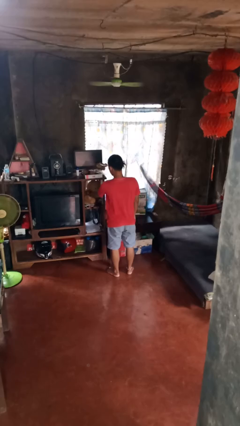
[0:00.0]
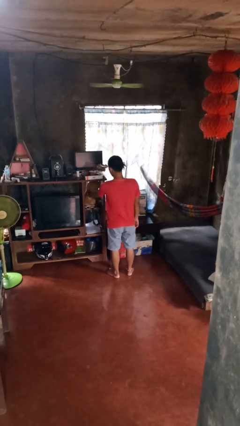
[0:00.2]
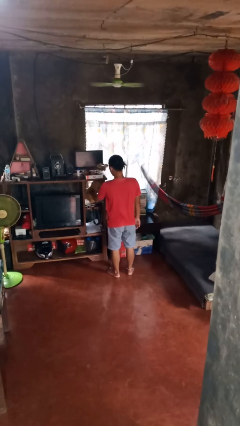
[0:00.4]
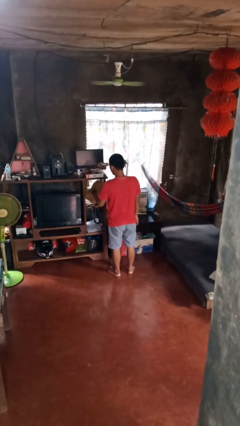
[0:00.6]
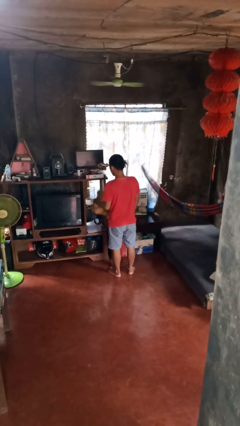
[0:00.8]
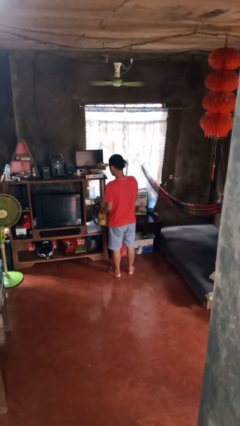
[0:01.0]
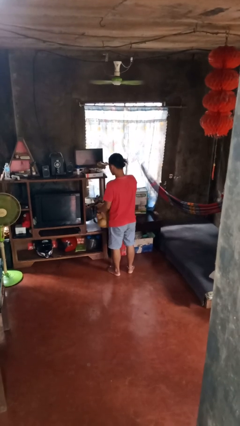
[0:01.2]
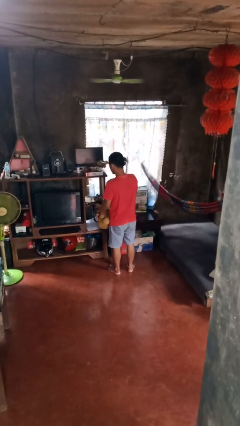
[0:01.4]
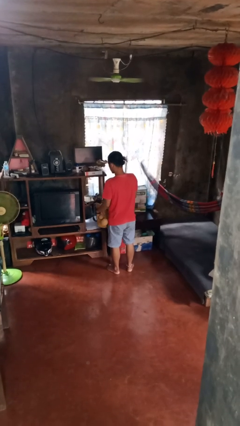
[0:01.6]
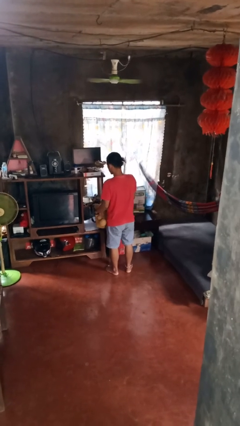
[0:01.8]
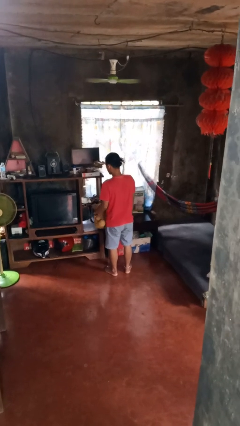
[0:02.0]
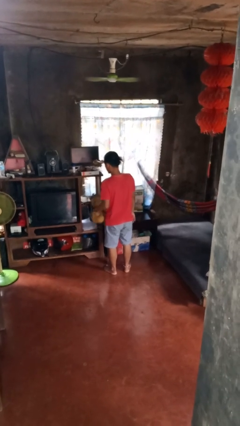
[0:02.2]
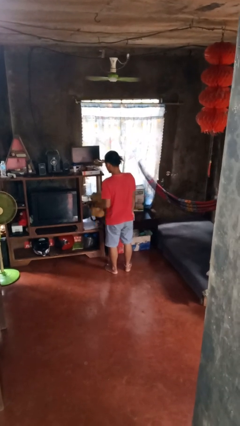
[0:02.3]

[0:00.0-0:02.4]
person picks up object from cabinet

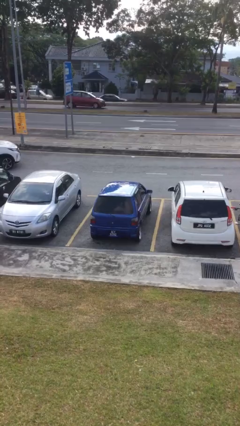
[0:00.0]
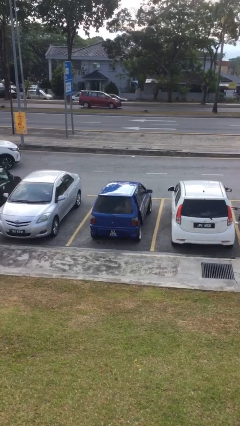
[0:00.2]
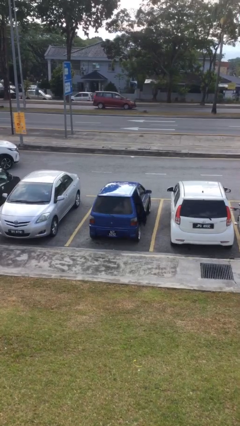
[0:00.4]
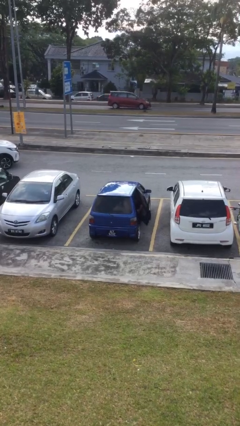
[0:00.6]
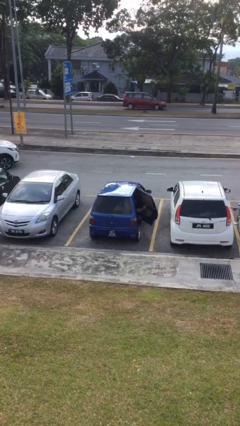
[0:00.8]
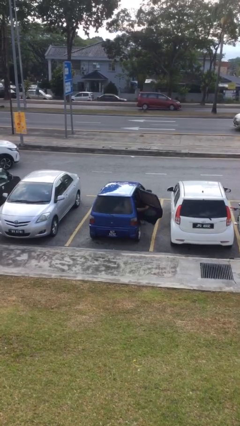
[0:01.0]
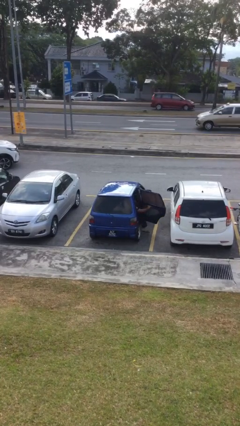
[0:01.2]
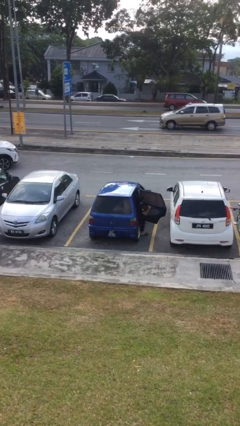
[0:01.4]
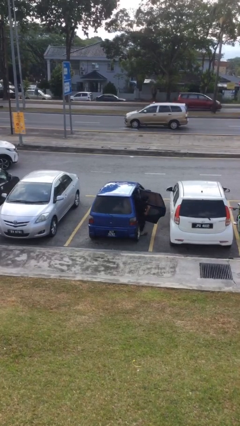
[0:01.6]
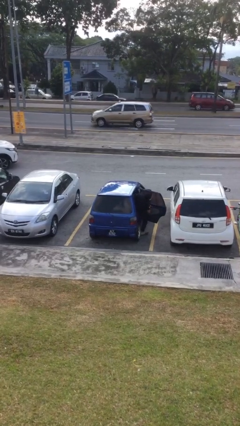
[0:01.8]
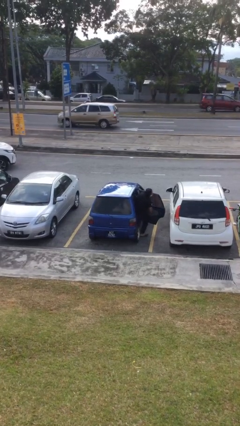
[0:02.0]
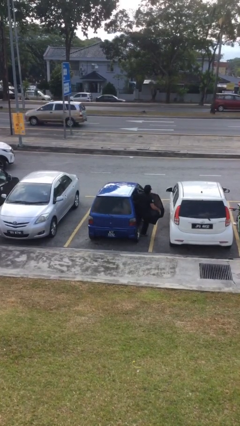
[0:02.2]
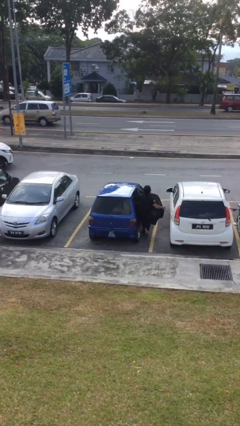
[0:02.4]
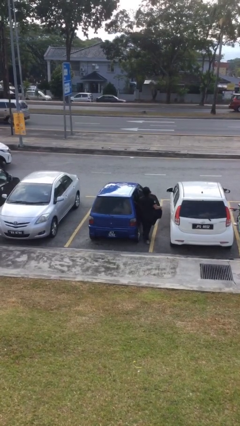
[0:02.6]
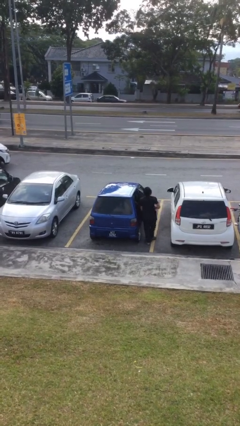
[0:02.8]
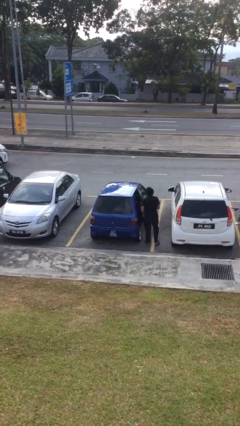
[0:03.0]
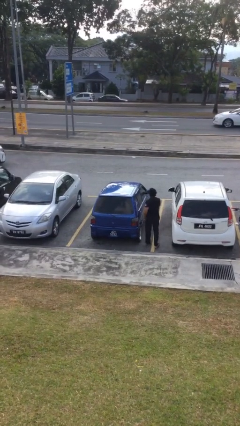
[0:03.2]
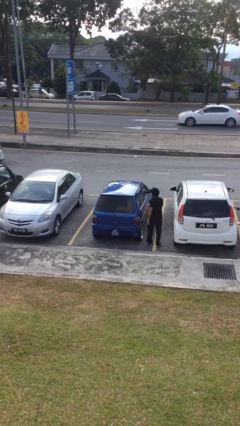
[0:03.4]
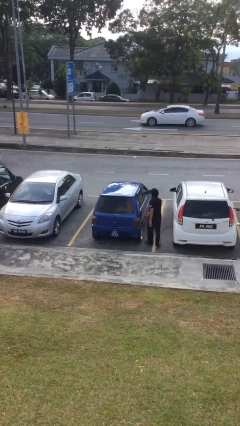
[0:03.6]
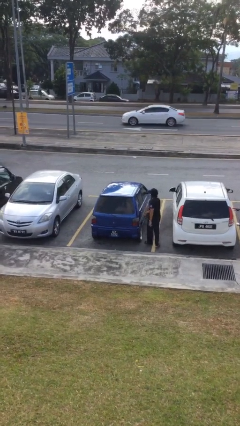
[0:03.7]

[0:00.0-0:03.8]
car drops off person

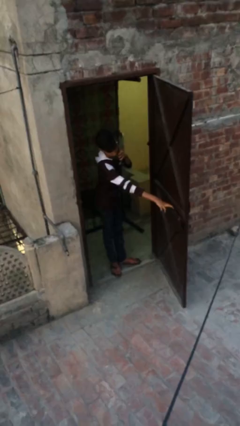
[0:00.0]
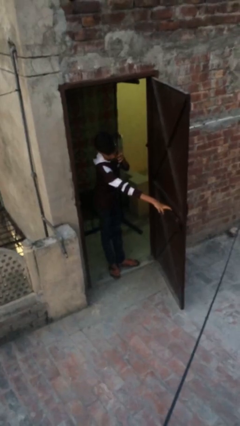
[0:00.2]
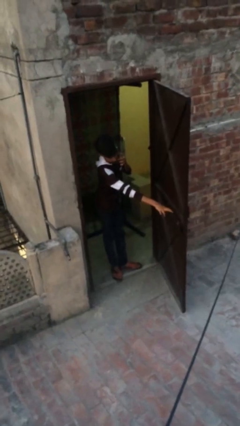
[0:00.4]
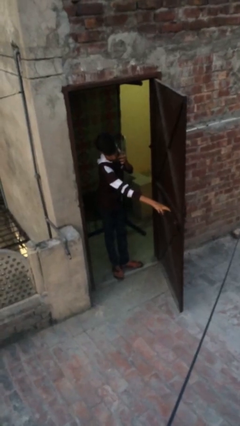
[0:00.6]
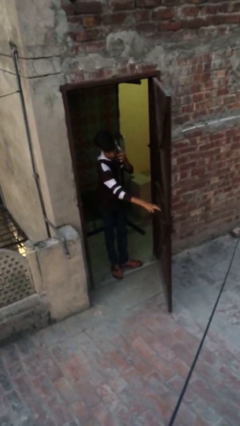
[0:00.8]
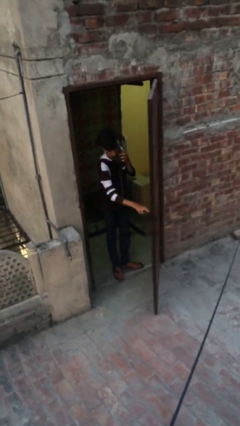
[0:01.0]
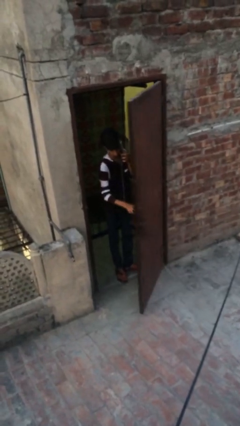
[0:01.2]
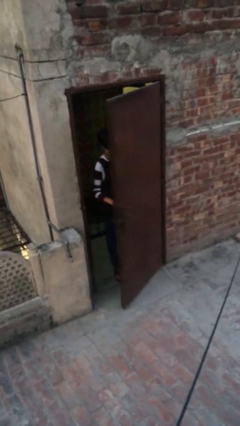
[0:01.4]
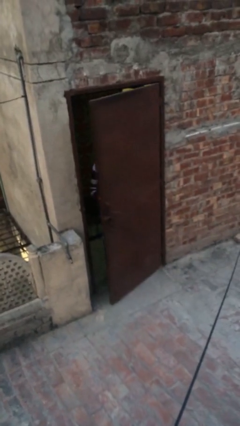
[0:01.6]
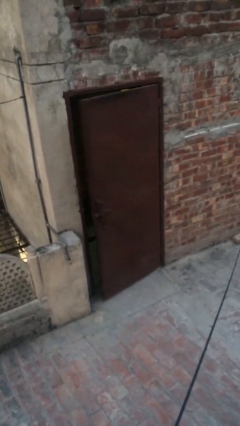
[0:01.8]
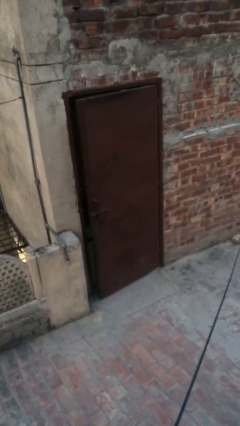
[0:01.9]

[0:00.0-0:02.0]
person closes facility door

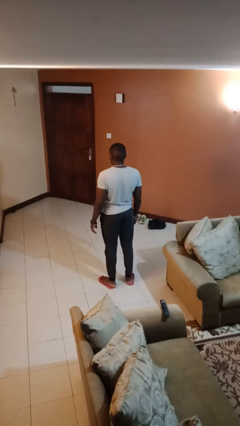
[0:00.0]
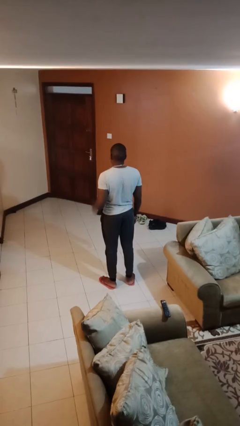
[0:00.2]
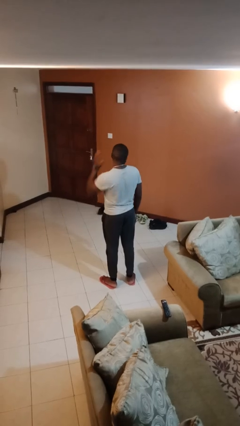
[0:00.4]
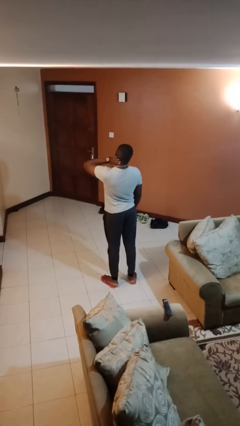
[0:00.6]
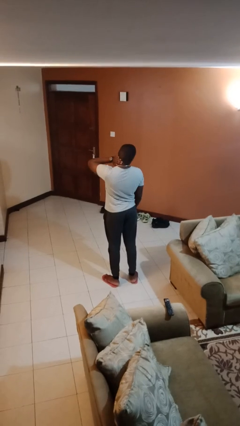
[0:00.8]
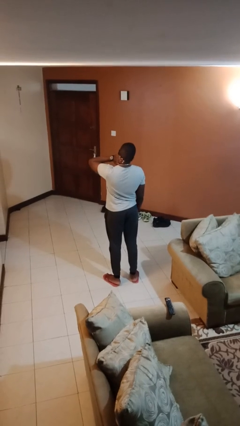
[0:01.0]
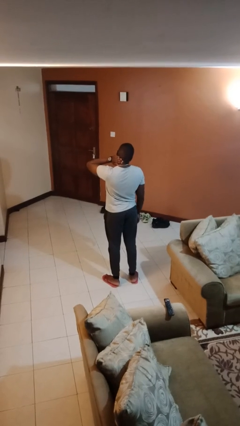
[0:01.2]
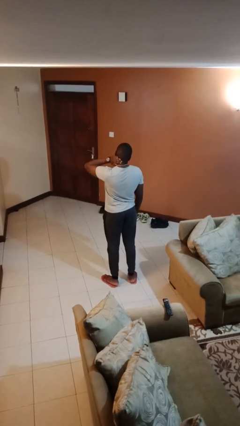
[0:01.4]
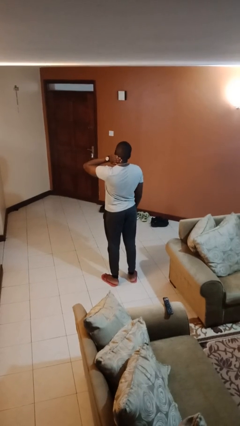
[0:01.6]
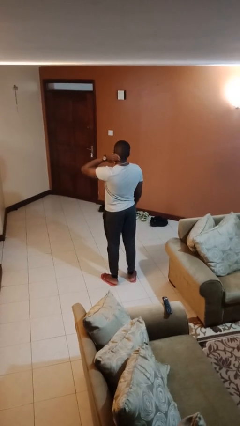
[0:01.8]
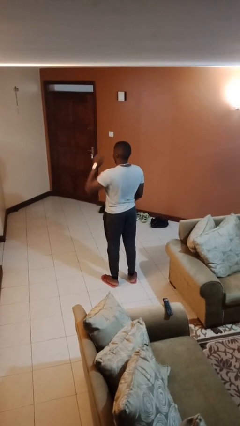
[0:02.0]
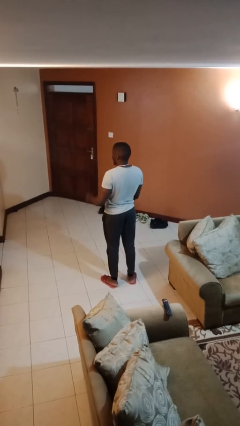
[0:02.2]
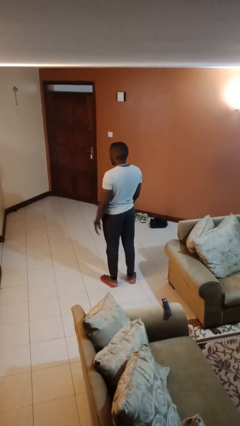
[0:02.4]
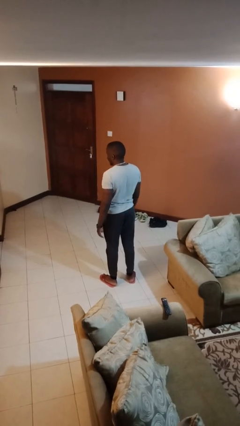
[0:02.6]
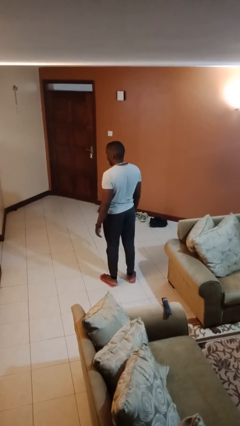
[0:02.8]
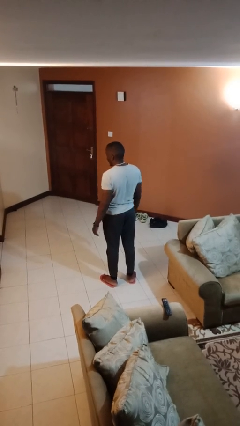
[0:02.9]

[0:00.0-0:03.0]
person swats bug

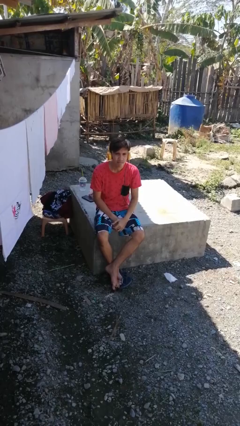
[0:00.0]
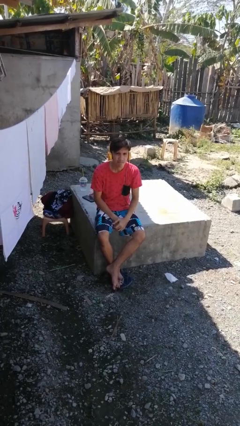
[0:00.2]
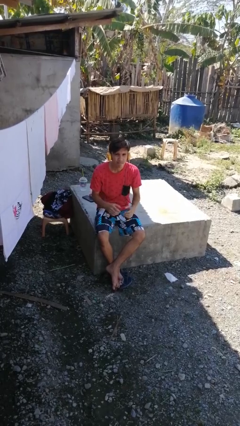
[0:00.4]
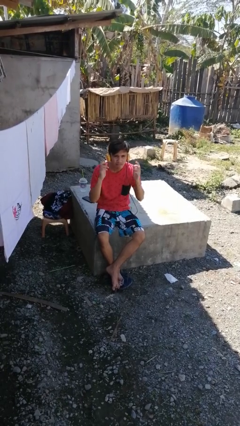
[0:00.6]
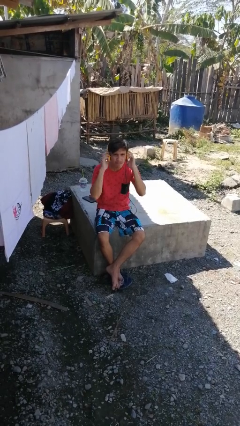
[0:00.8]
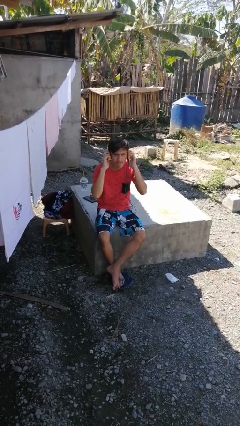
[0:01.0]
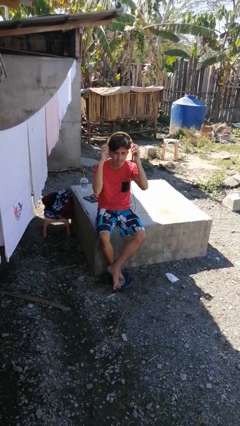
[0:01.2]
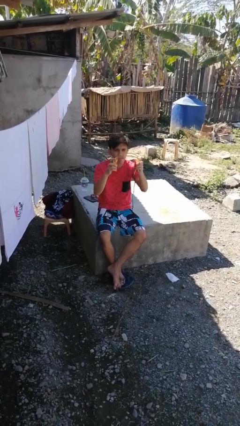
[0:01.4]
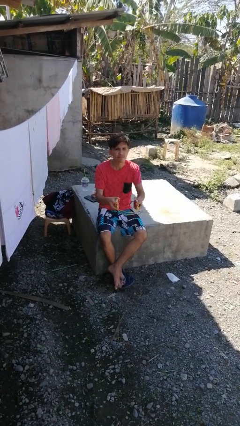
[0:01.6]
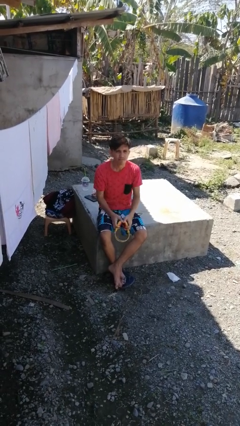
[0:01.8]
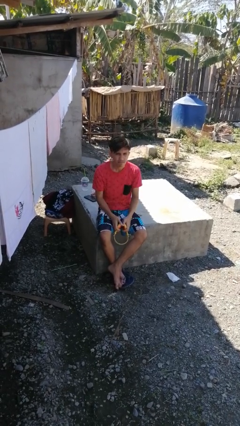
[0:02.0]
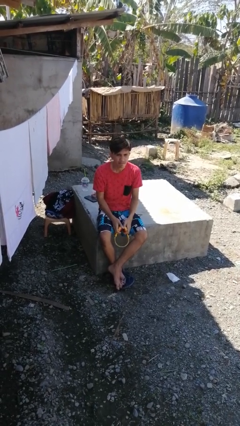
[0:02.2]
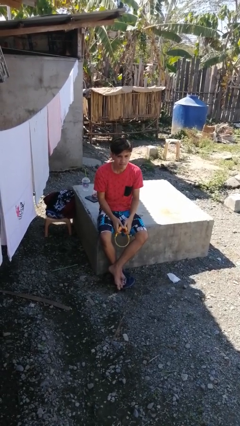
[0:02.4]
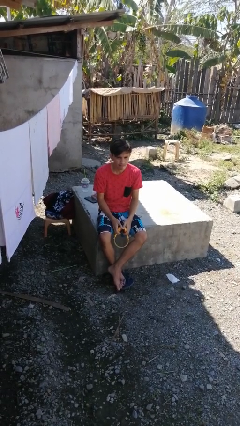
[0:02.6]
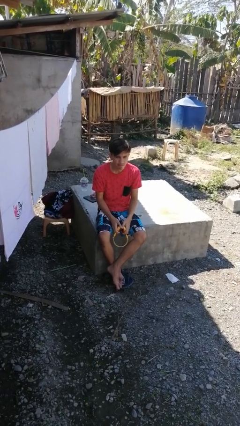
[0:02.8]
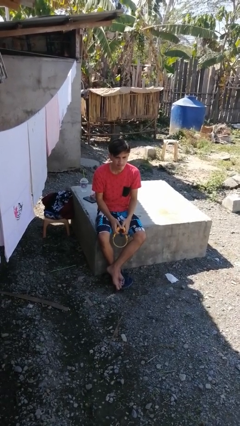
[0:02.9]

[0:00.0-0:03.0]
person takes off headphones

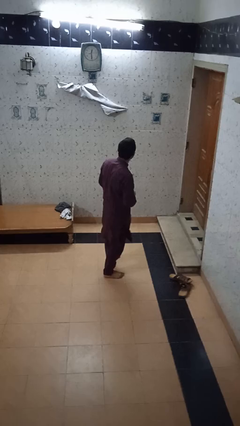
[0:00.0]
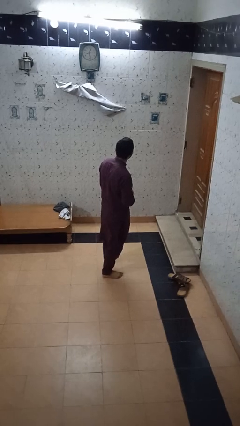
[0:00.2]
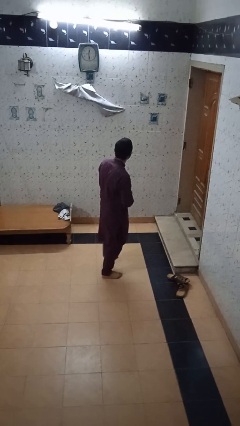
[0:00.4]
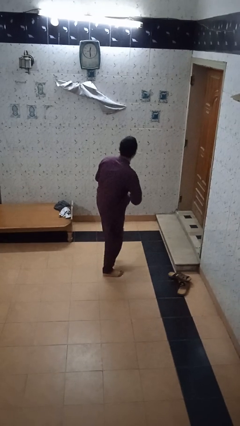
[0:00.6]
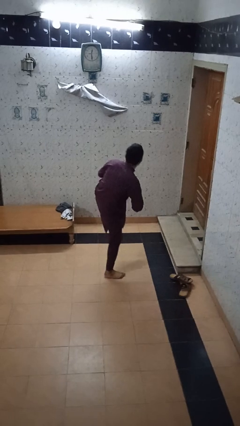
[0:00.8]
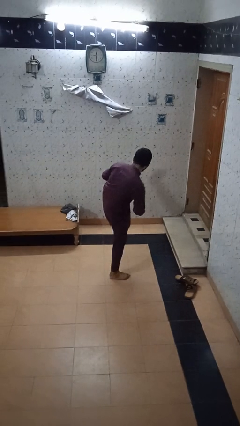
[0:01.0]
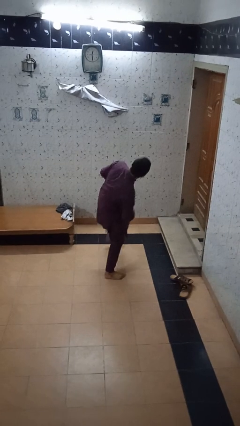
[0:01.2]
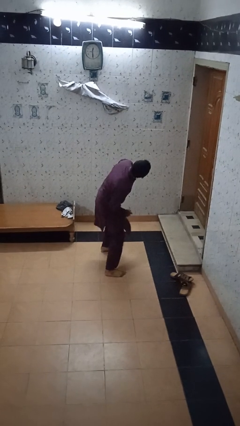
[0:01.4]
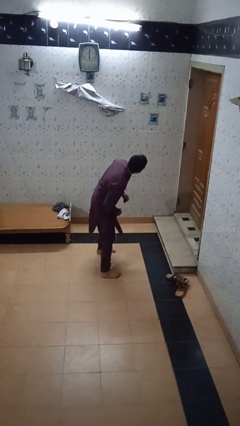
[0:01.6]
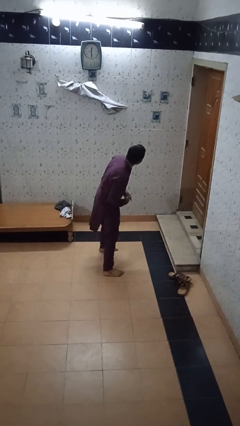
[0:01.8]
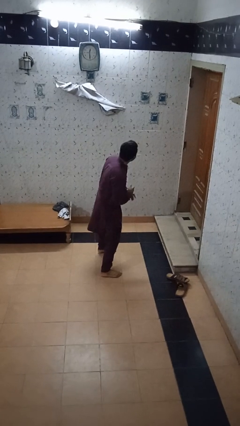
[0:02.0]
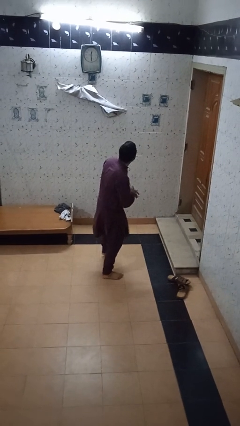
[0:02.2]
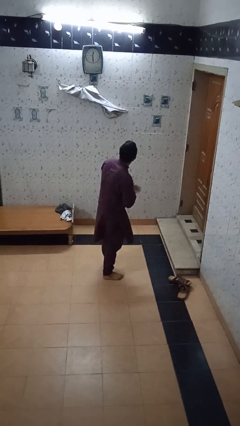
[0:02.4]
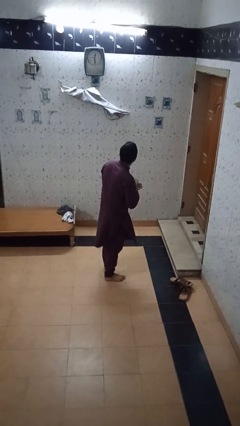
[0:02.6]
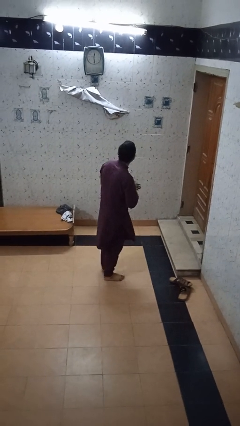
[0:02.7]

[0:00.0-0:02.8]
person karate kicks

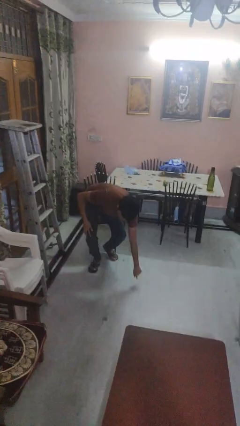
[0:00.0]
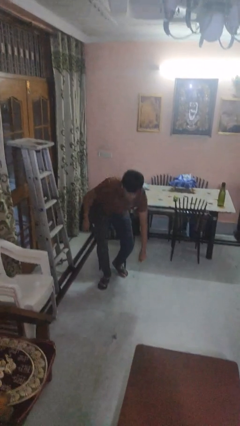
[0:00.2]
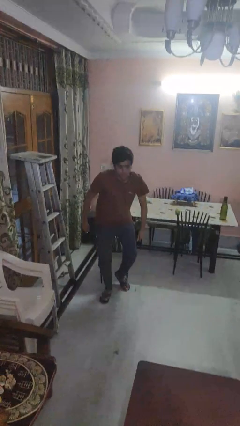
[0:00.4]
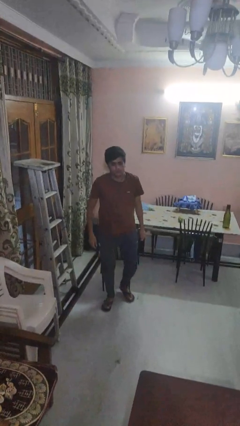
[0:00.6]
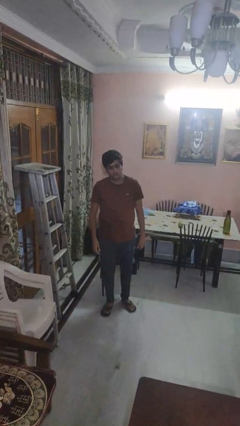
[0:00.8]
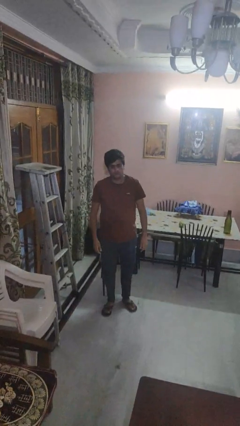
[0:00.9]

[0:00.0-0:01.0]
person stands up from floor
